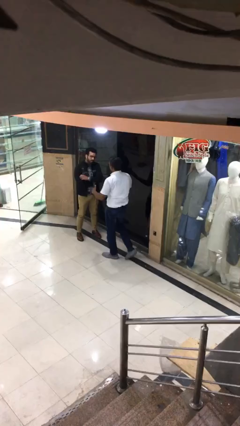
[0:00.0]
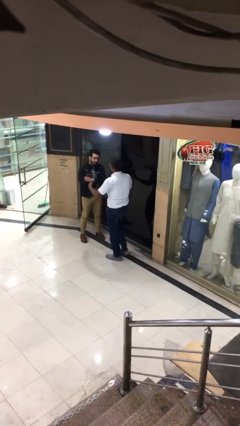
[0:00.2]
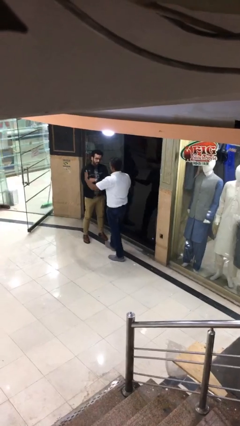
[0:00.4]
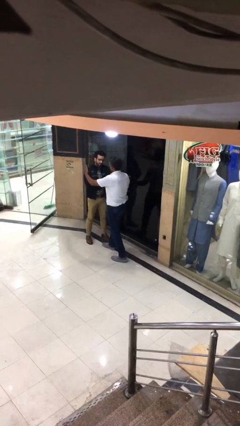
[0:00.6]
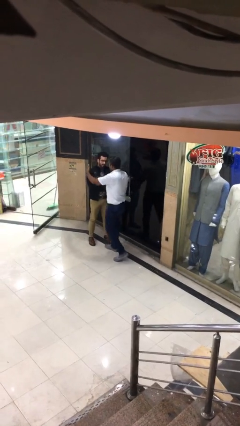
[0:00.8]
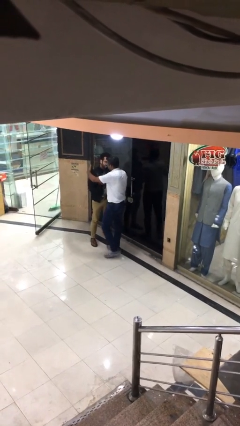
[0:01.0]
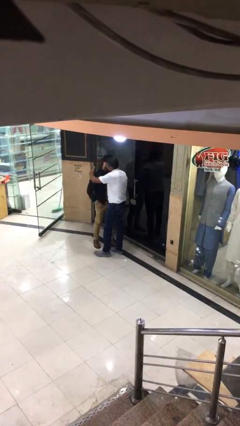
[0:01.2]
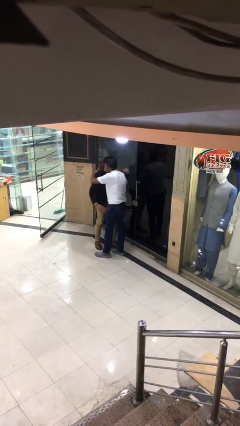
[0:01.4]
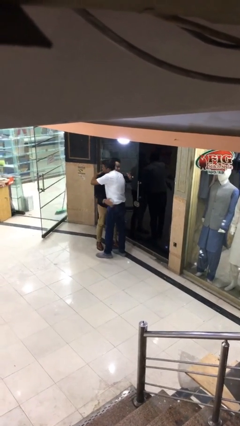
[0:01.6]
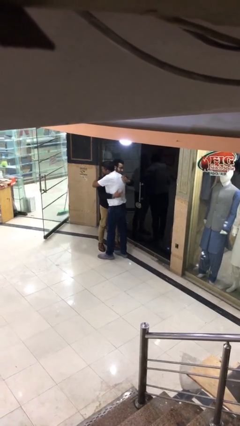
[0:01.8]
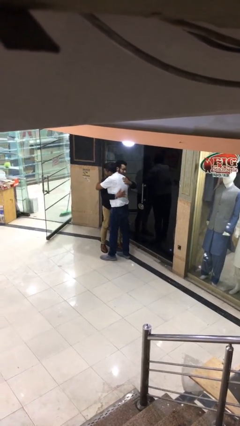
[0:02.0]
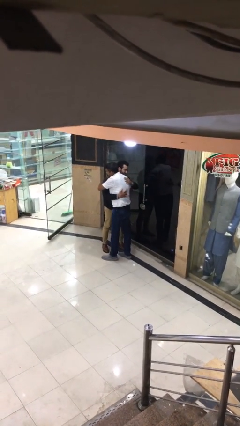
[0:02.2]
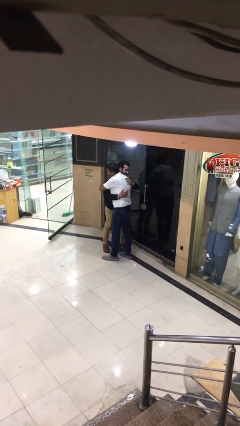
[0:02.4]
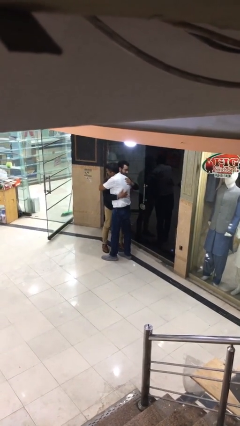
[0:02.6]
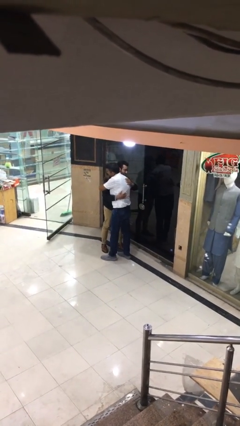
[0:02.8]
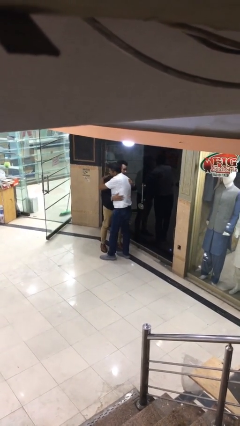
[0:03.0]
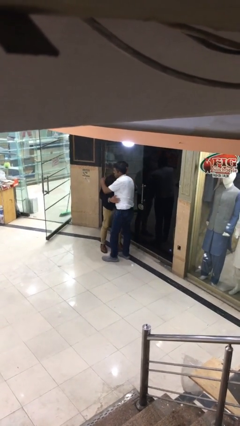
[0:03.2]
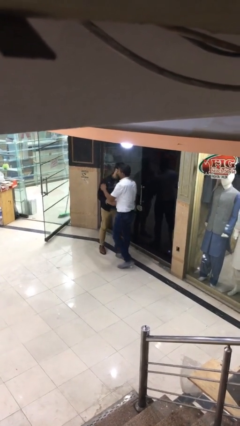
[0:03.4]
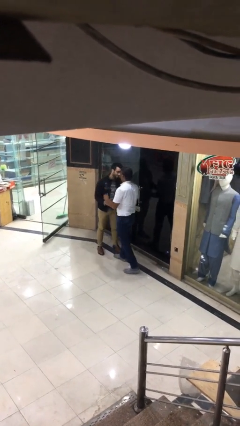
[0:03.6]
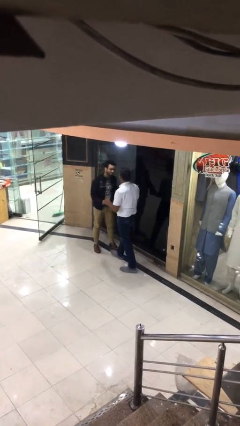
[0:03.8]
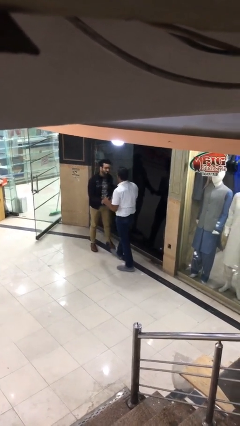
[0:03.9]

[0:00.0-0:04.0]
person embraces person

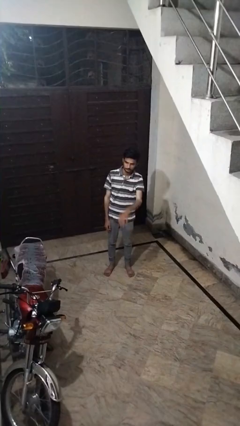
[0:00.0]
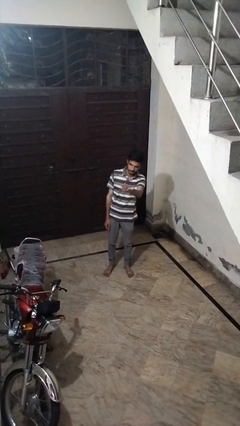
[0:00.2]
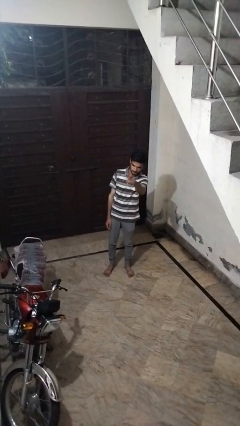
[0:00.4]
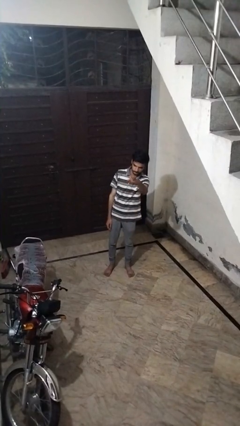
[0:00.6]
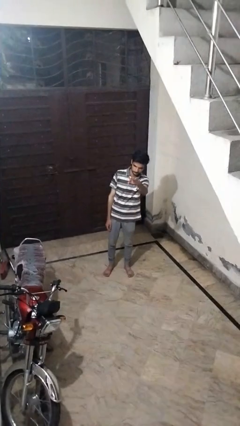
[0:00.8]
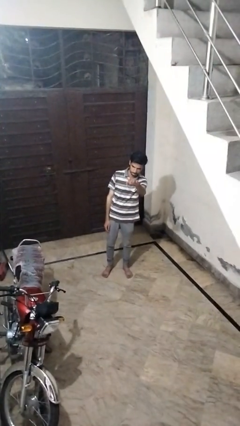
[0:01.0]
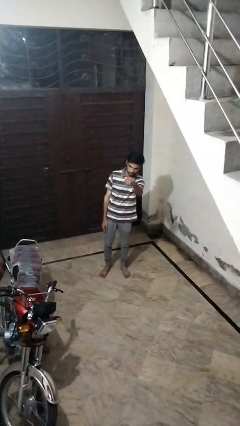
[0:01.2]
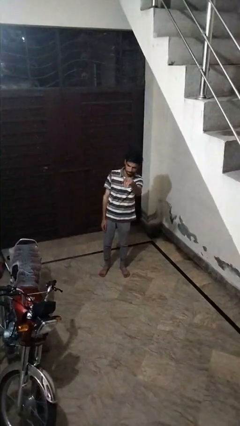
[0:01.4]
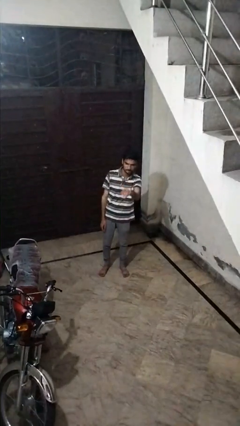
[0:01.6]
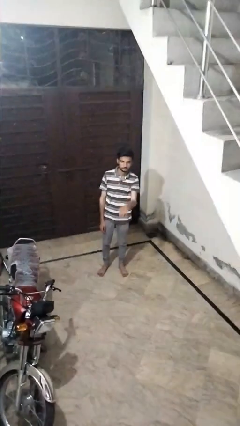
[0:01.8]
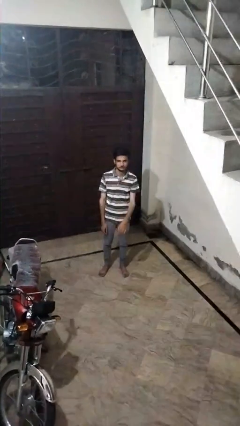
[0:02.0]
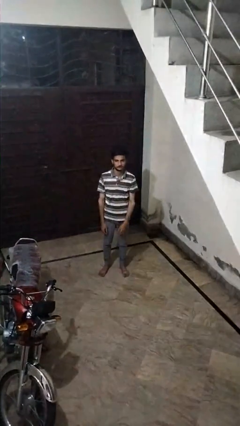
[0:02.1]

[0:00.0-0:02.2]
person gestures come here

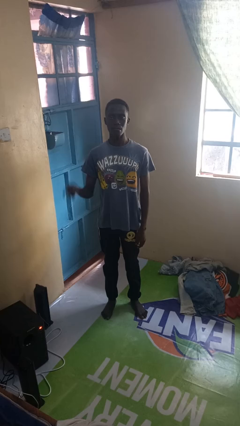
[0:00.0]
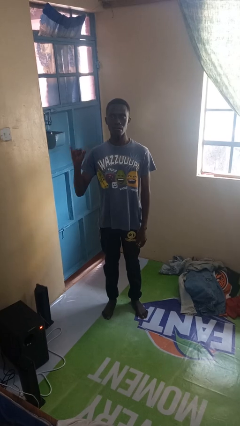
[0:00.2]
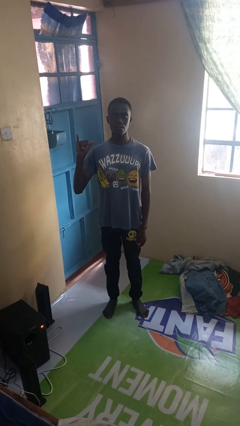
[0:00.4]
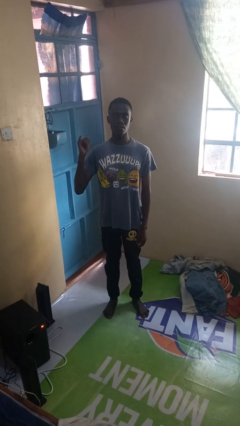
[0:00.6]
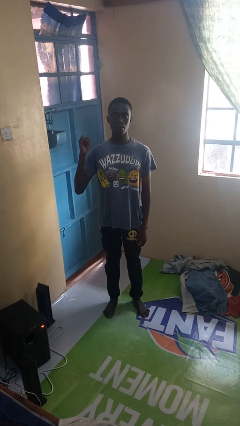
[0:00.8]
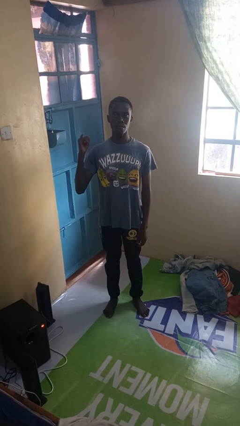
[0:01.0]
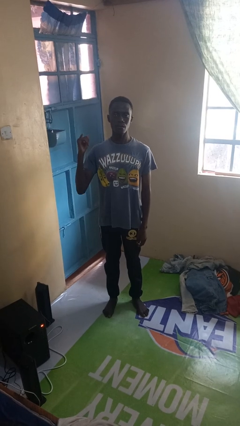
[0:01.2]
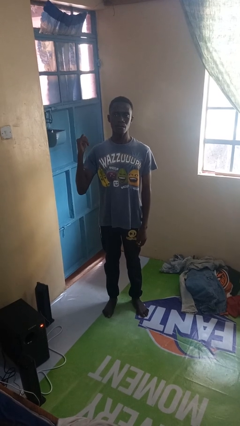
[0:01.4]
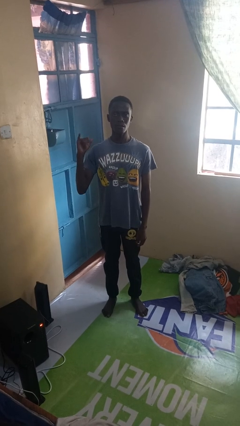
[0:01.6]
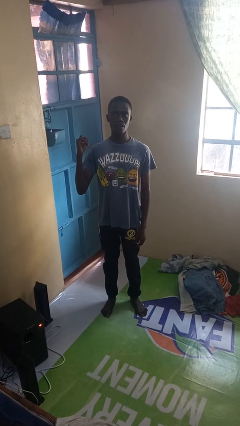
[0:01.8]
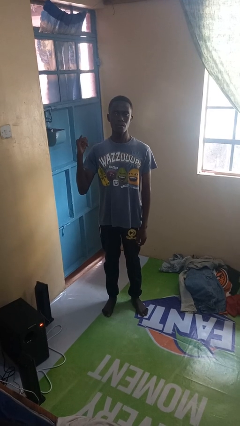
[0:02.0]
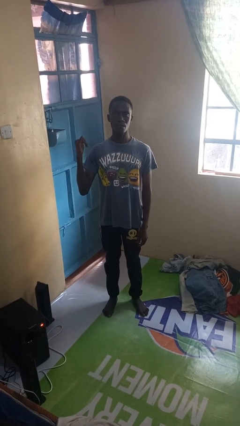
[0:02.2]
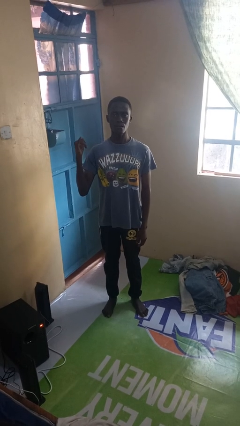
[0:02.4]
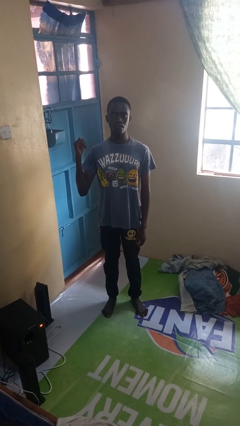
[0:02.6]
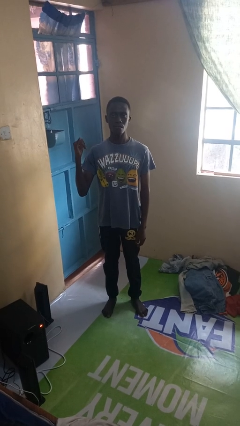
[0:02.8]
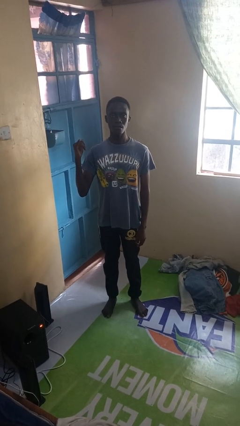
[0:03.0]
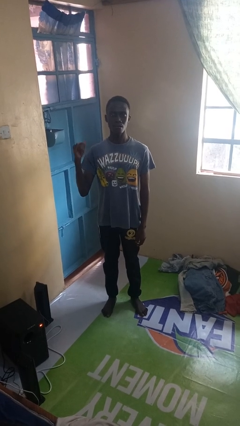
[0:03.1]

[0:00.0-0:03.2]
person gestures hang loose

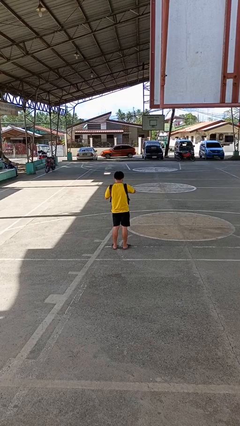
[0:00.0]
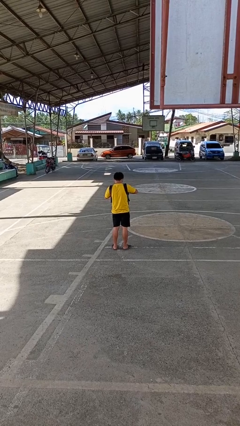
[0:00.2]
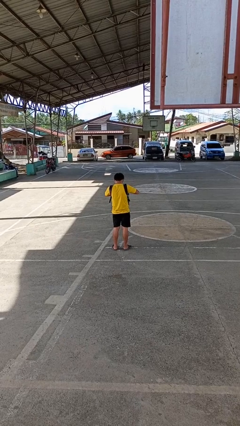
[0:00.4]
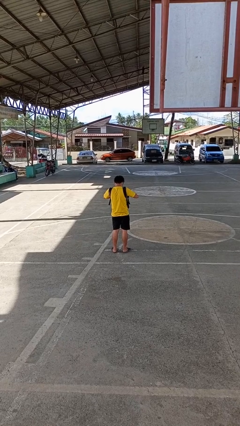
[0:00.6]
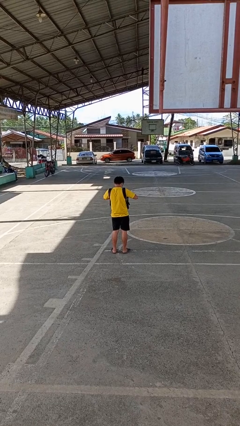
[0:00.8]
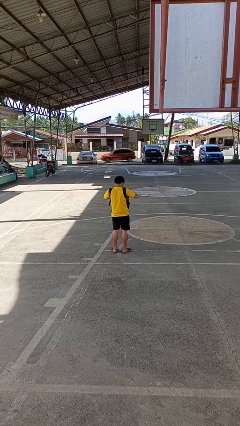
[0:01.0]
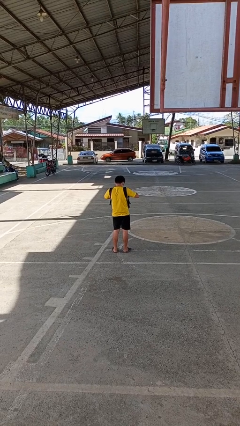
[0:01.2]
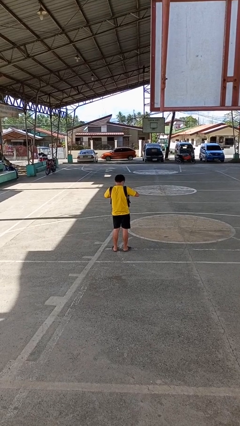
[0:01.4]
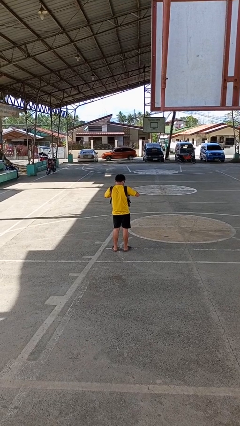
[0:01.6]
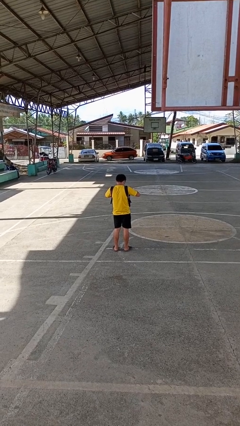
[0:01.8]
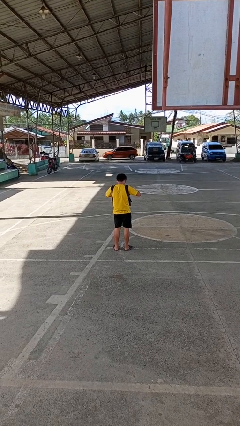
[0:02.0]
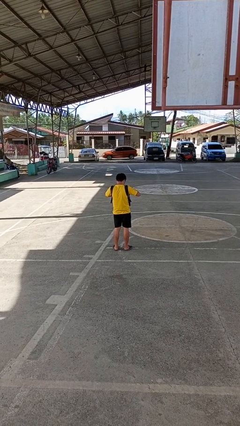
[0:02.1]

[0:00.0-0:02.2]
person searches in backpack

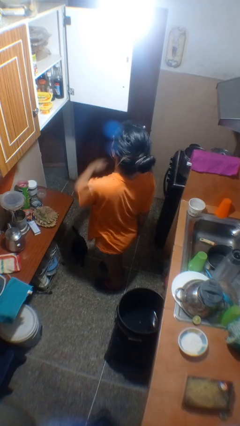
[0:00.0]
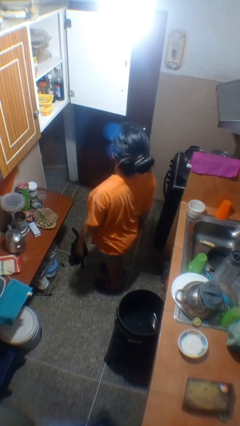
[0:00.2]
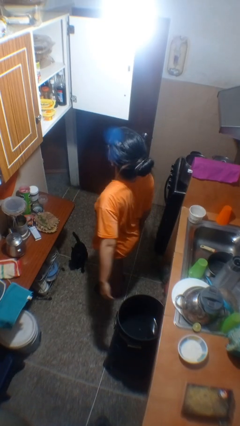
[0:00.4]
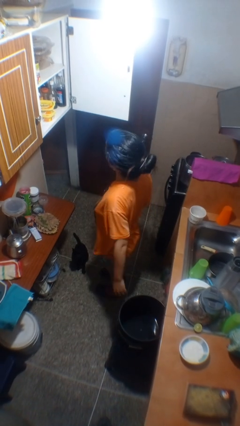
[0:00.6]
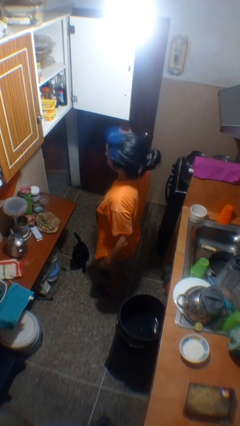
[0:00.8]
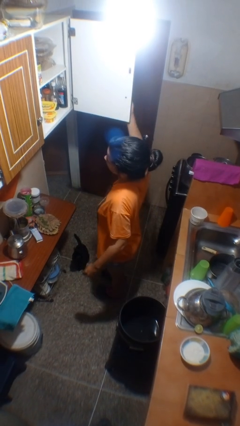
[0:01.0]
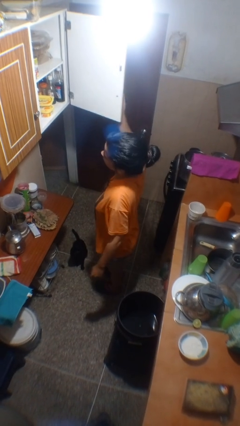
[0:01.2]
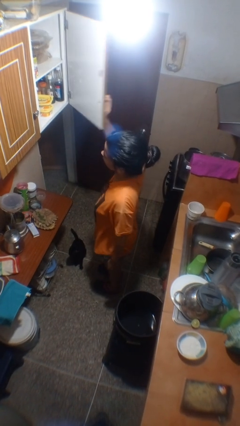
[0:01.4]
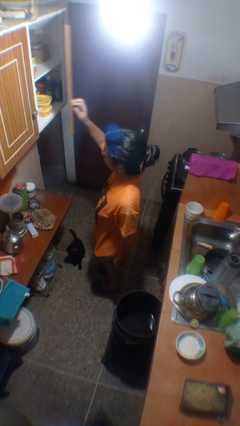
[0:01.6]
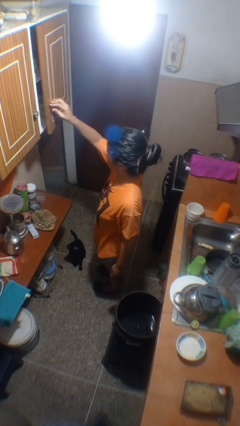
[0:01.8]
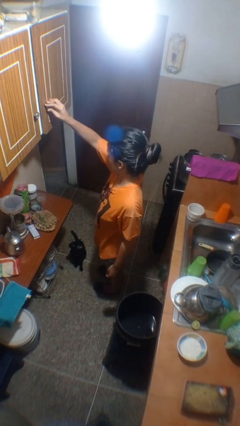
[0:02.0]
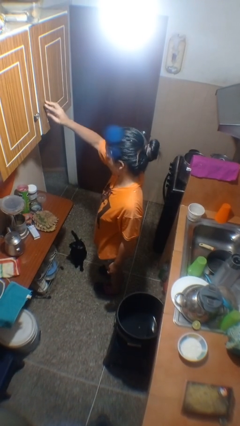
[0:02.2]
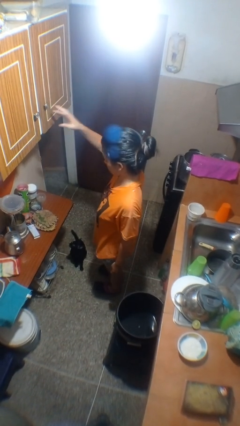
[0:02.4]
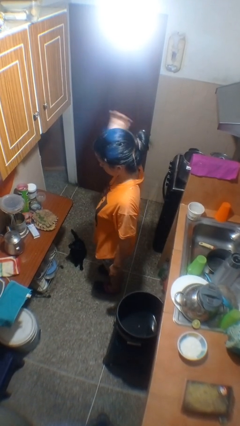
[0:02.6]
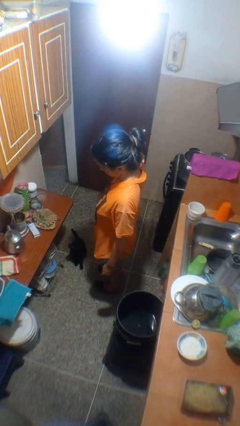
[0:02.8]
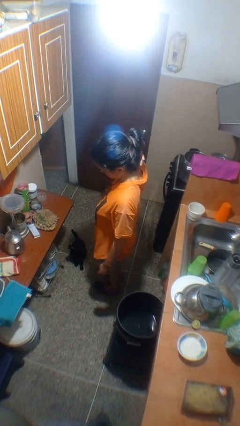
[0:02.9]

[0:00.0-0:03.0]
person closes cabinet

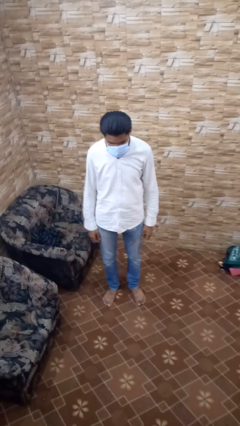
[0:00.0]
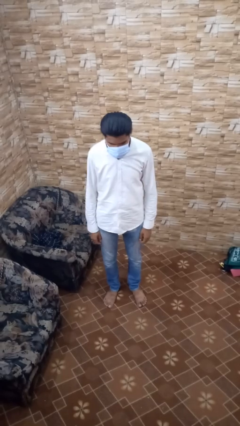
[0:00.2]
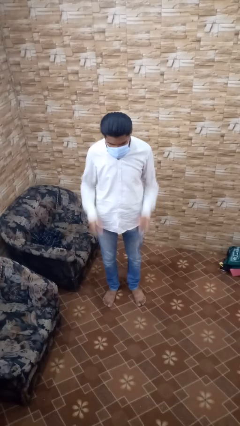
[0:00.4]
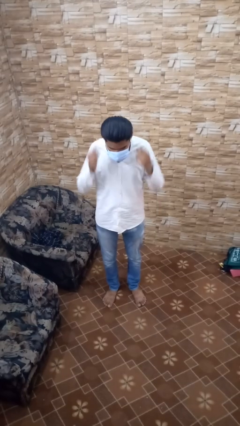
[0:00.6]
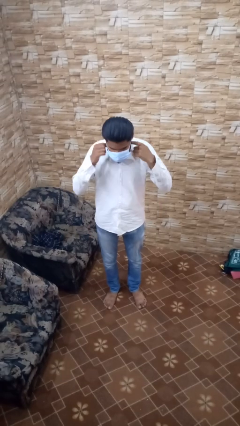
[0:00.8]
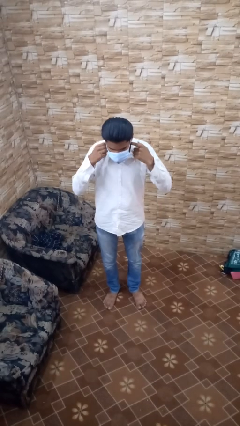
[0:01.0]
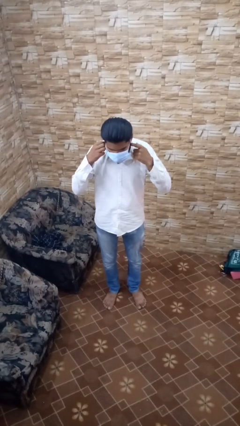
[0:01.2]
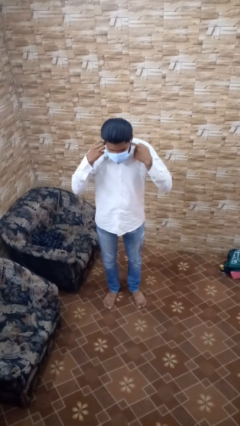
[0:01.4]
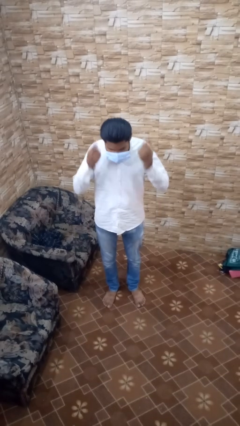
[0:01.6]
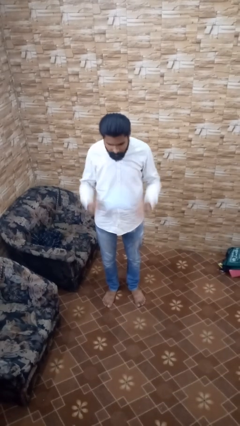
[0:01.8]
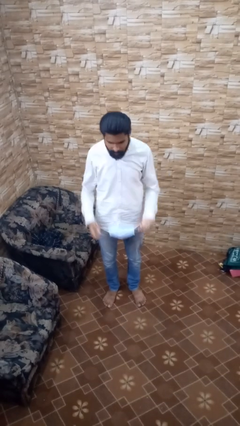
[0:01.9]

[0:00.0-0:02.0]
person takes off facemask

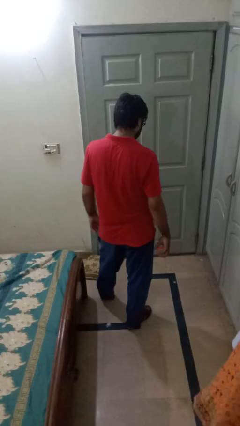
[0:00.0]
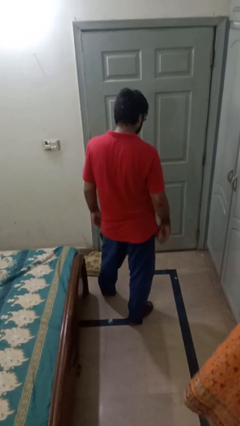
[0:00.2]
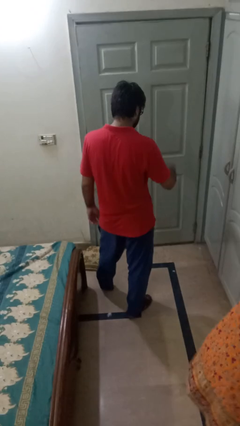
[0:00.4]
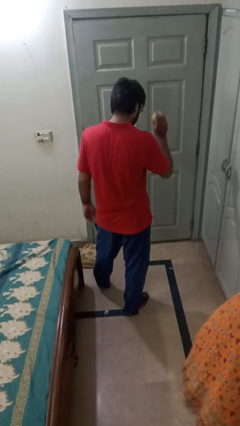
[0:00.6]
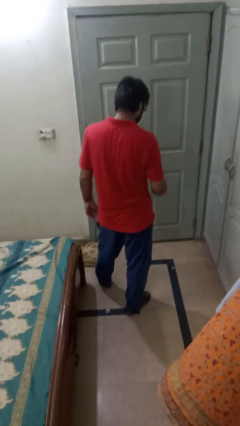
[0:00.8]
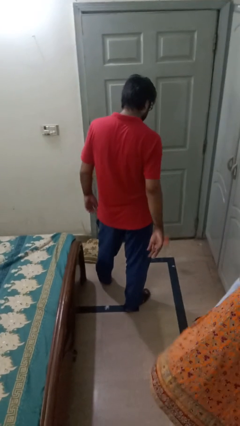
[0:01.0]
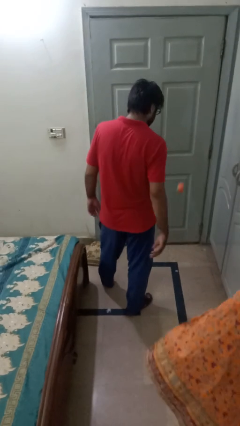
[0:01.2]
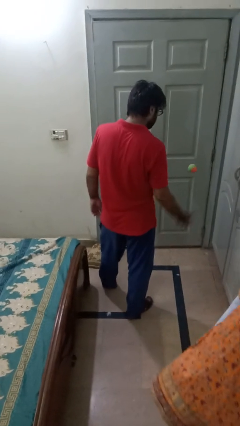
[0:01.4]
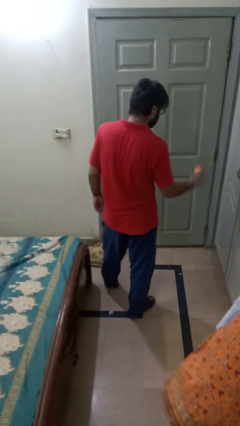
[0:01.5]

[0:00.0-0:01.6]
person bounces ball on floor
